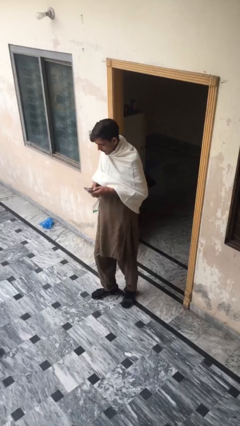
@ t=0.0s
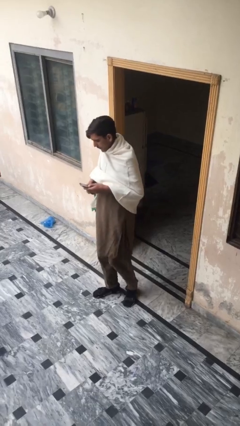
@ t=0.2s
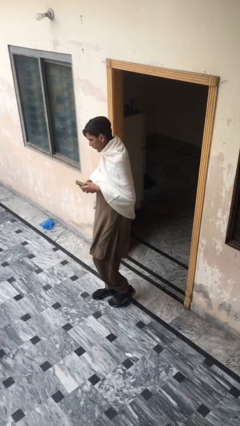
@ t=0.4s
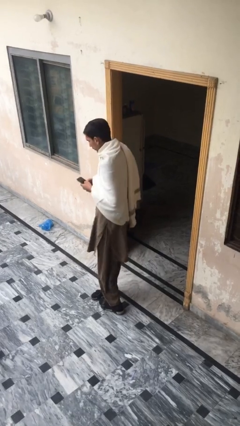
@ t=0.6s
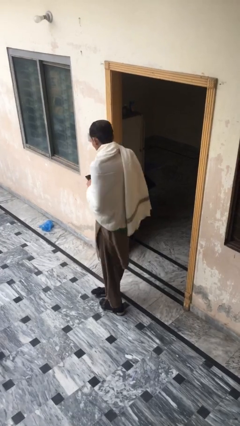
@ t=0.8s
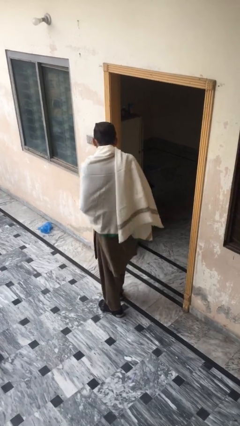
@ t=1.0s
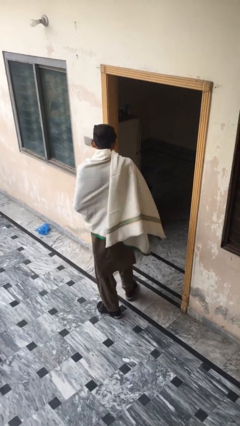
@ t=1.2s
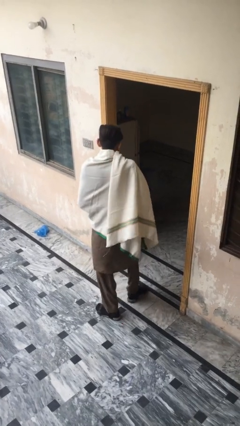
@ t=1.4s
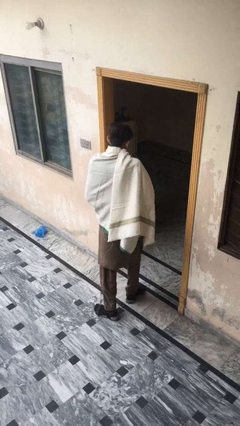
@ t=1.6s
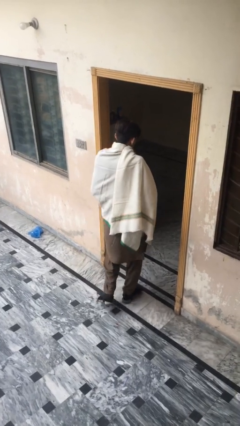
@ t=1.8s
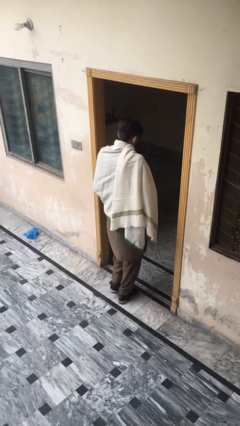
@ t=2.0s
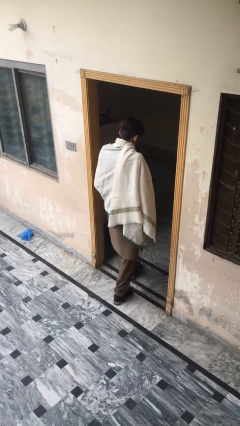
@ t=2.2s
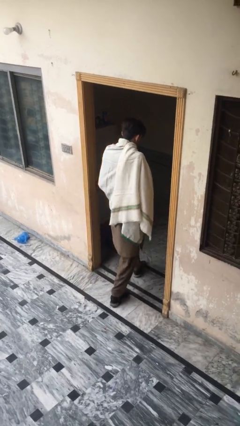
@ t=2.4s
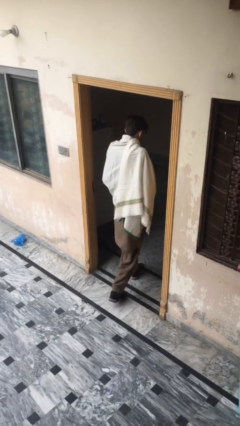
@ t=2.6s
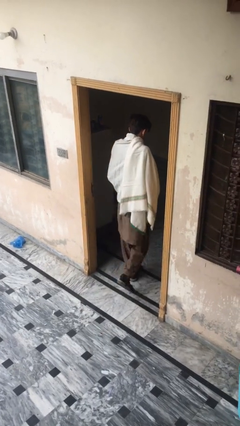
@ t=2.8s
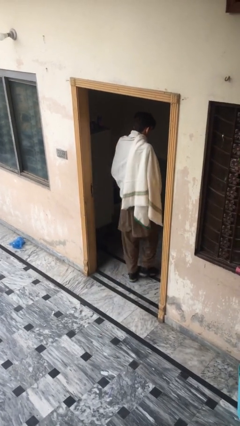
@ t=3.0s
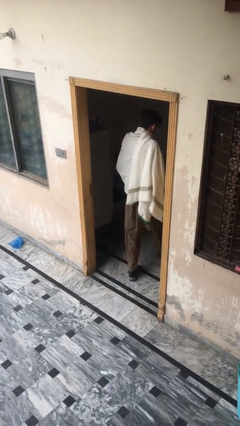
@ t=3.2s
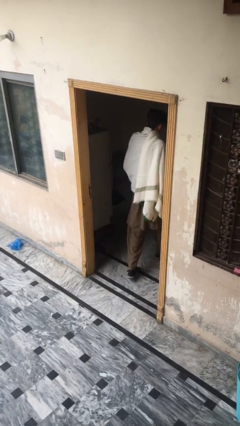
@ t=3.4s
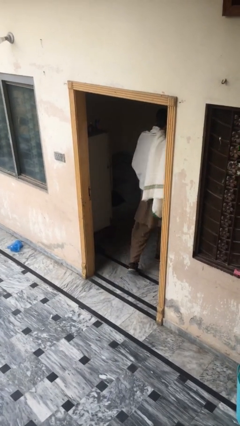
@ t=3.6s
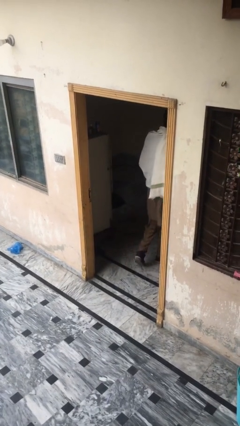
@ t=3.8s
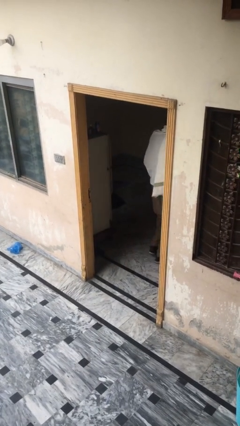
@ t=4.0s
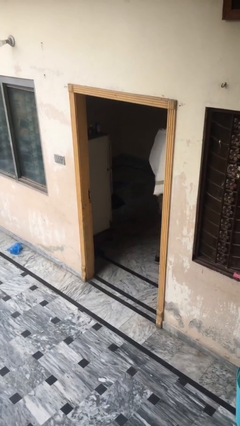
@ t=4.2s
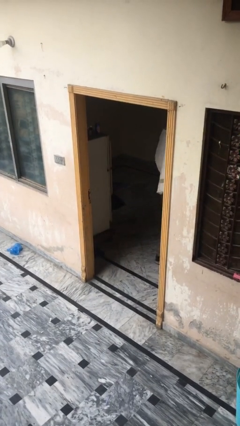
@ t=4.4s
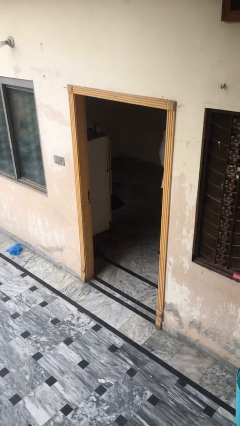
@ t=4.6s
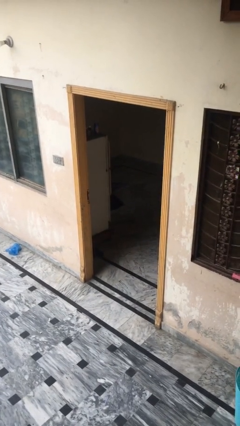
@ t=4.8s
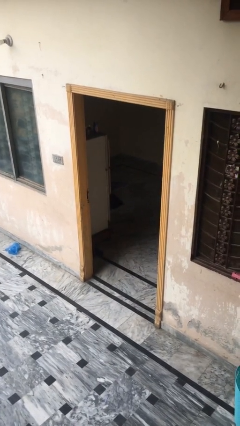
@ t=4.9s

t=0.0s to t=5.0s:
person exits scene through structure

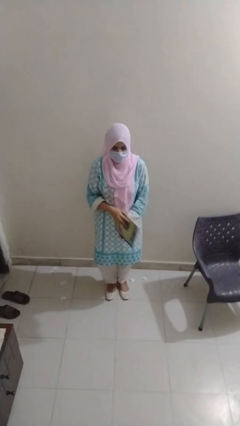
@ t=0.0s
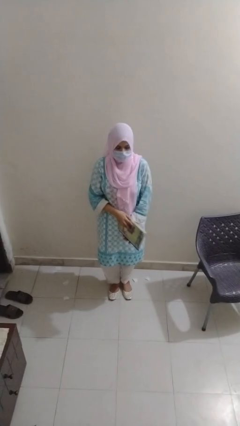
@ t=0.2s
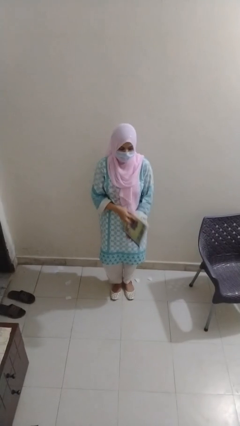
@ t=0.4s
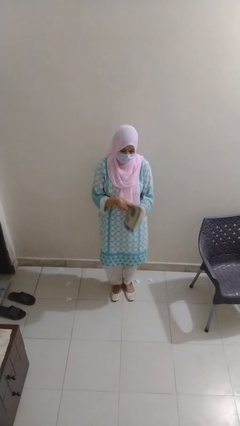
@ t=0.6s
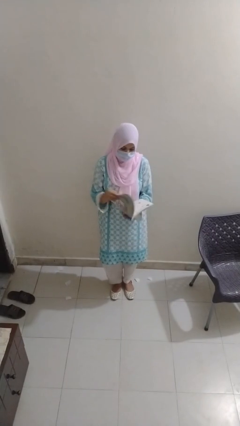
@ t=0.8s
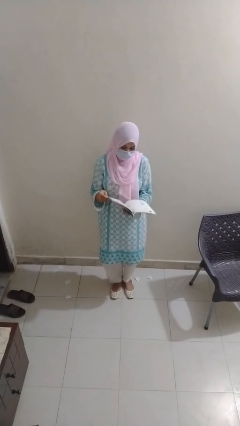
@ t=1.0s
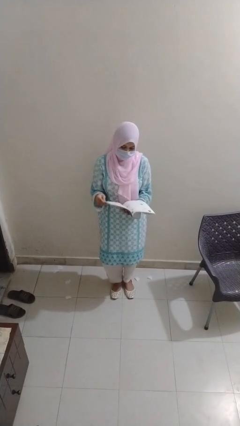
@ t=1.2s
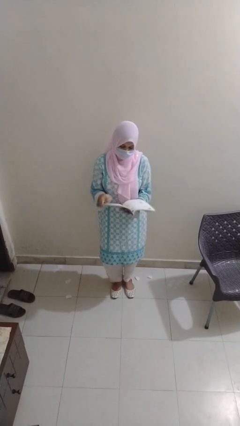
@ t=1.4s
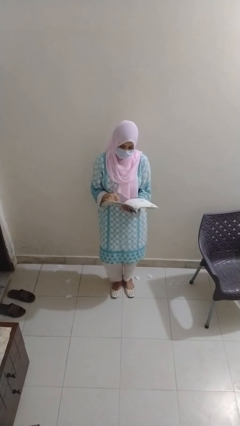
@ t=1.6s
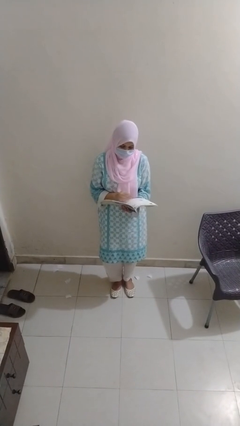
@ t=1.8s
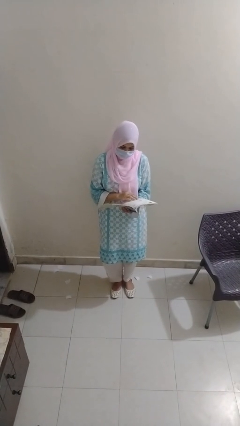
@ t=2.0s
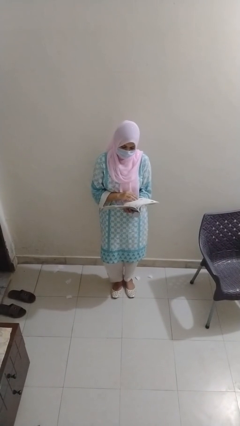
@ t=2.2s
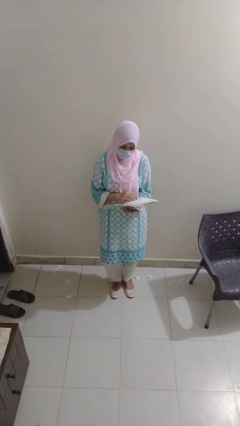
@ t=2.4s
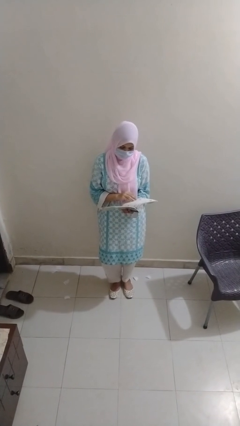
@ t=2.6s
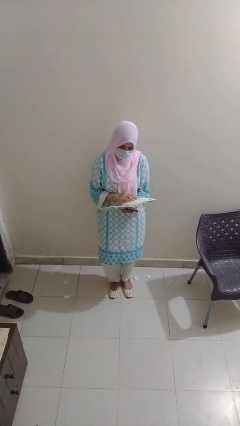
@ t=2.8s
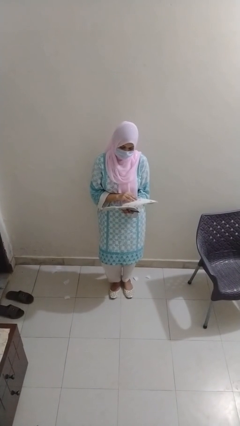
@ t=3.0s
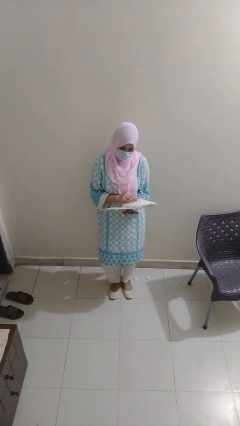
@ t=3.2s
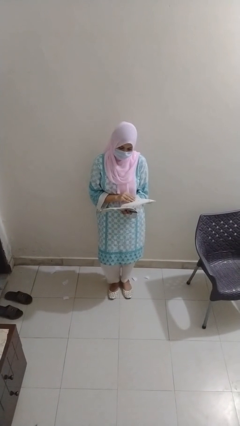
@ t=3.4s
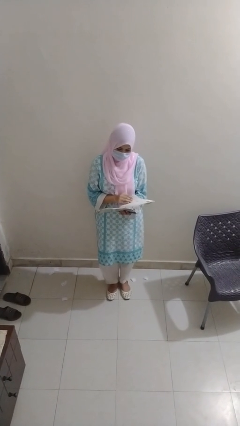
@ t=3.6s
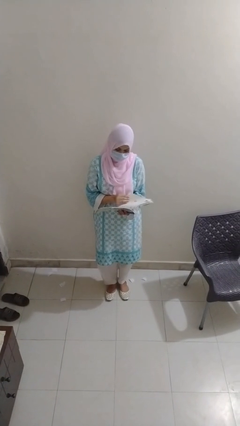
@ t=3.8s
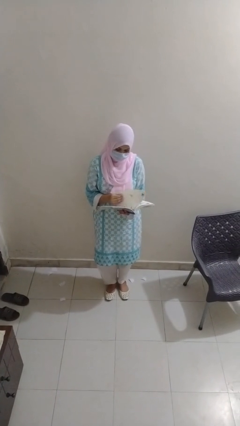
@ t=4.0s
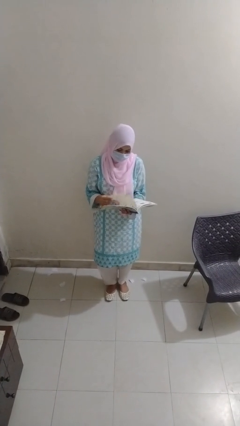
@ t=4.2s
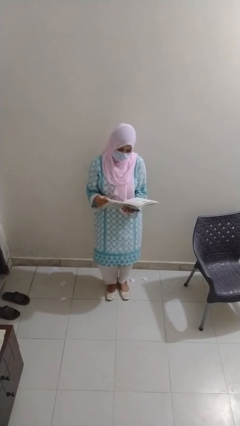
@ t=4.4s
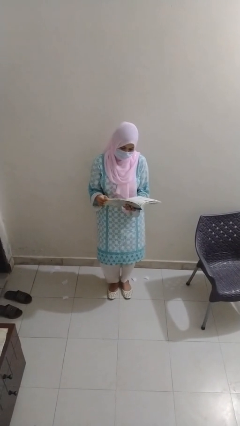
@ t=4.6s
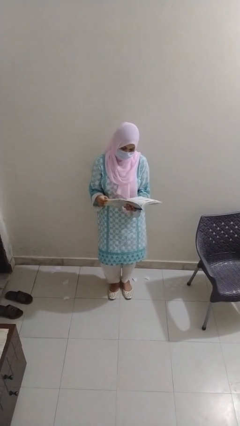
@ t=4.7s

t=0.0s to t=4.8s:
person reads book

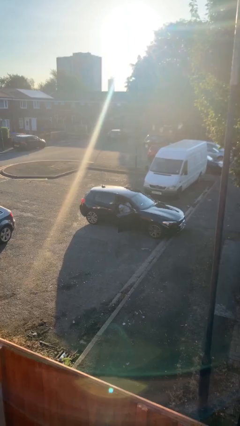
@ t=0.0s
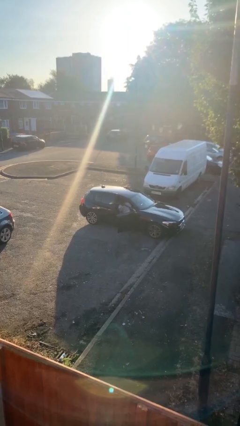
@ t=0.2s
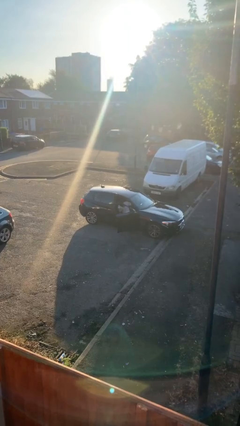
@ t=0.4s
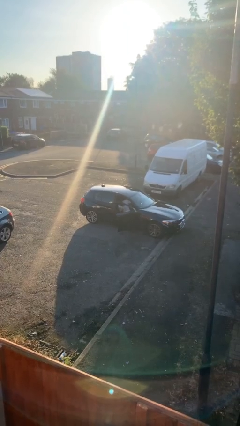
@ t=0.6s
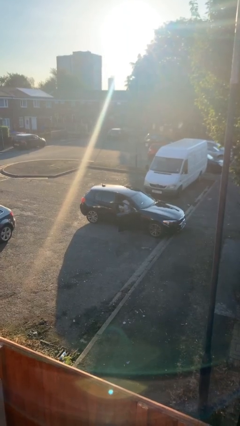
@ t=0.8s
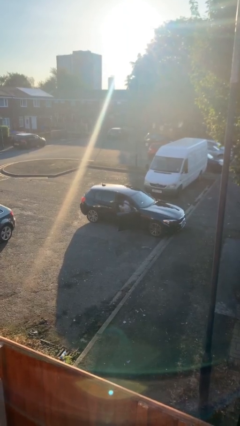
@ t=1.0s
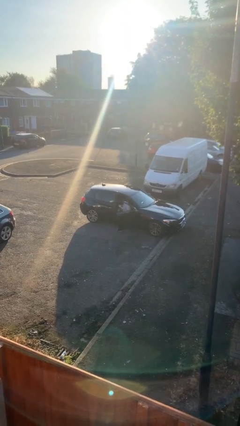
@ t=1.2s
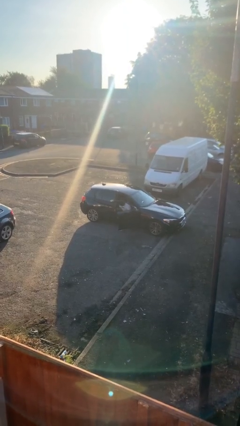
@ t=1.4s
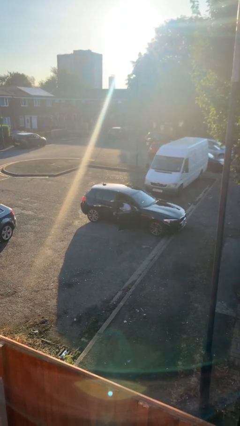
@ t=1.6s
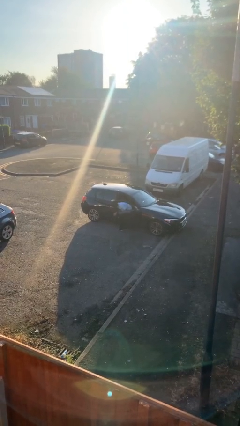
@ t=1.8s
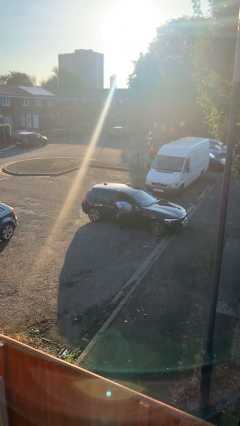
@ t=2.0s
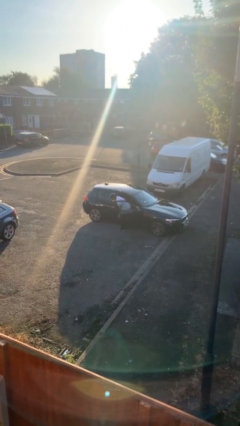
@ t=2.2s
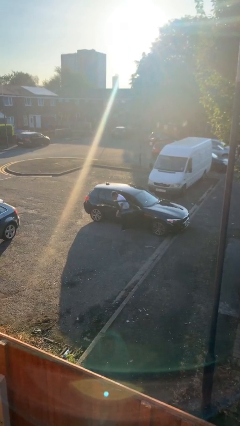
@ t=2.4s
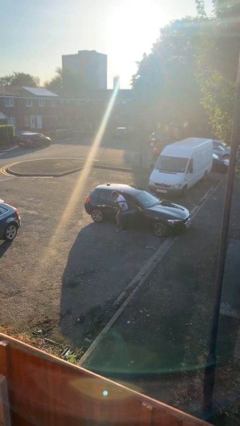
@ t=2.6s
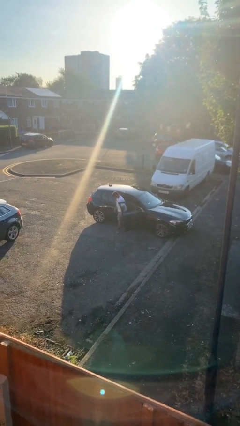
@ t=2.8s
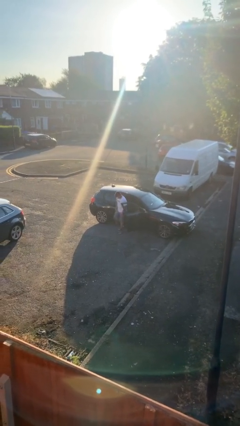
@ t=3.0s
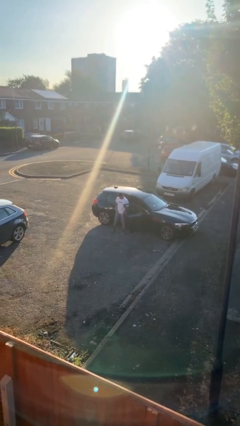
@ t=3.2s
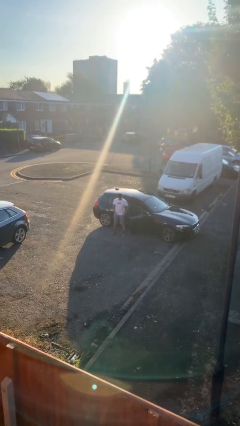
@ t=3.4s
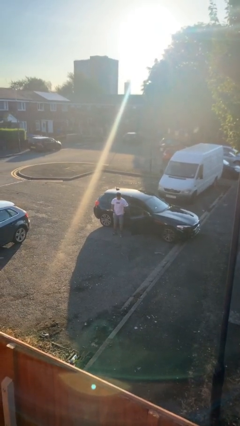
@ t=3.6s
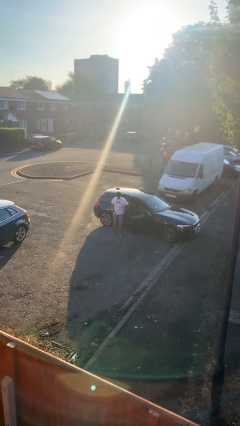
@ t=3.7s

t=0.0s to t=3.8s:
person exits car

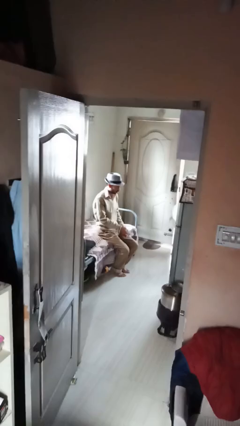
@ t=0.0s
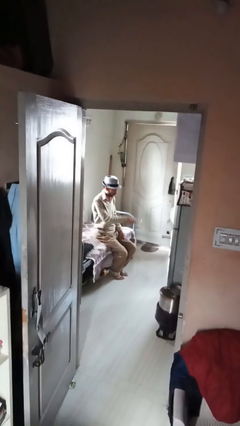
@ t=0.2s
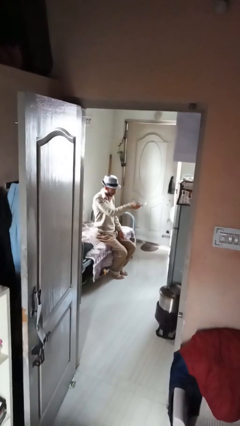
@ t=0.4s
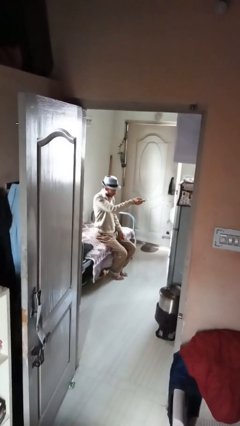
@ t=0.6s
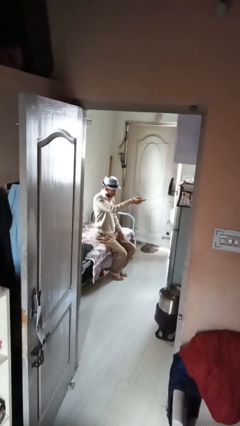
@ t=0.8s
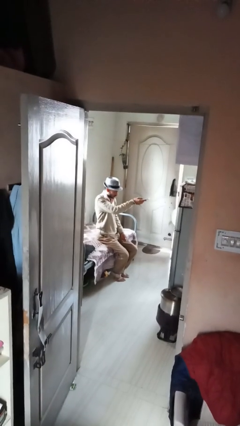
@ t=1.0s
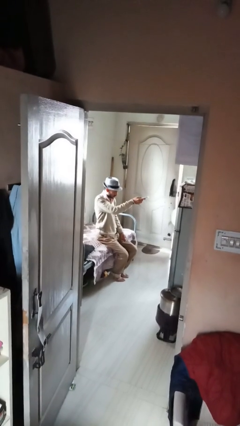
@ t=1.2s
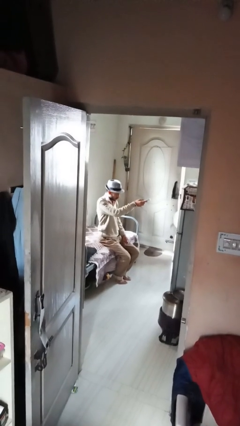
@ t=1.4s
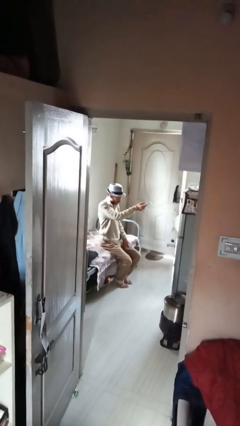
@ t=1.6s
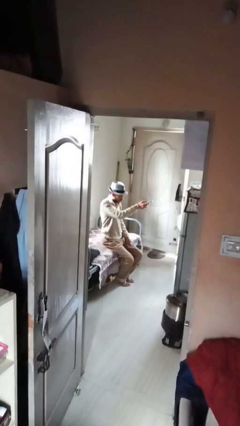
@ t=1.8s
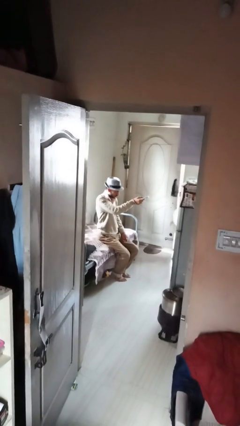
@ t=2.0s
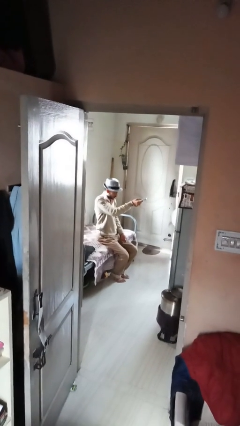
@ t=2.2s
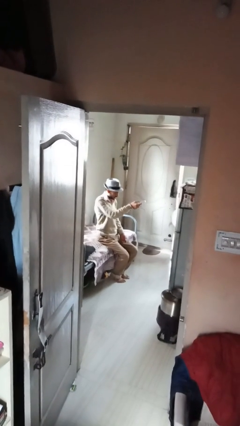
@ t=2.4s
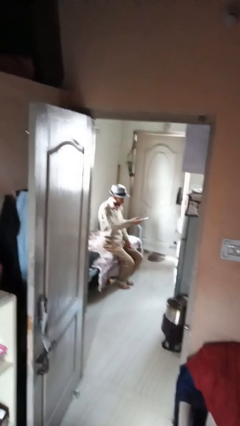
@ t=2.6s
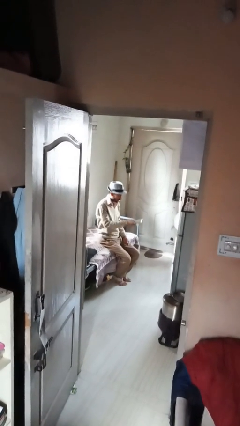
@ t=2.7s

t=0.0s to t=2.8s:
person uses television remote

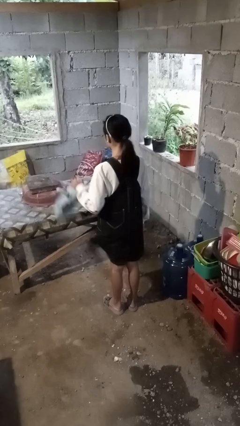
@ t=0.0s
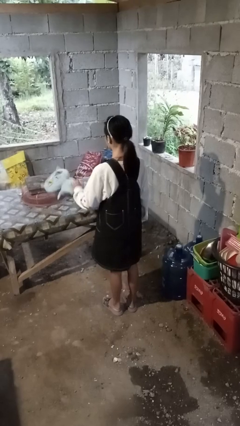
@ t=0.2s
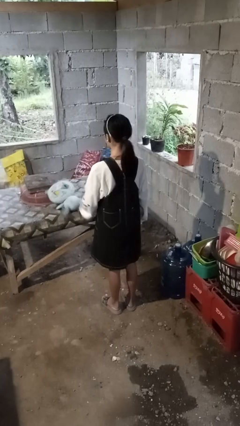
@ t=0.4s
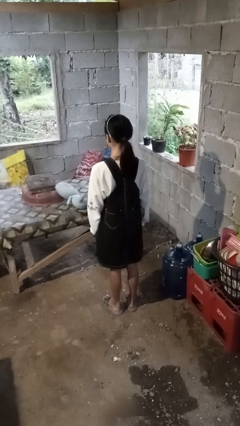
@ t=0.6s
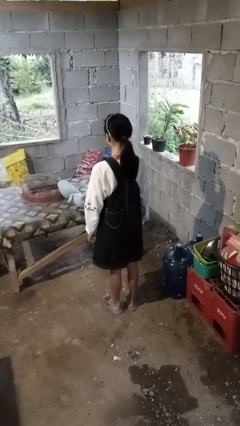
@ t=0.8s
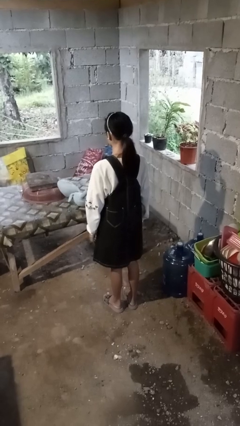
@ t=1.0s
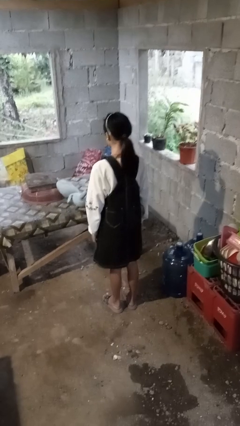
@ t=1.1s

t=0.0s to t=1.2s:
person throws object on table
